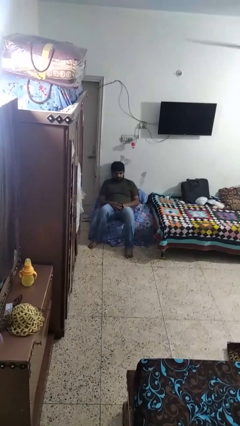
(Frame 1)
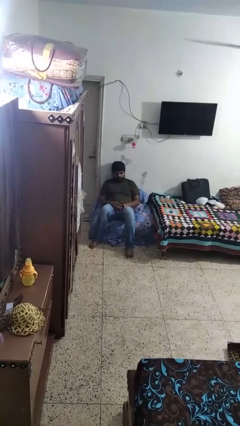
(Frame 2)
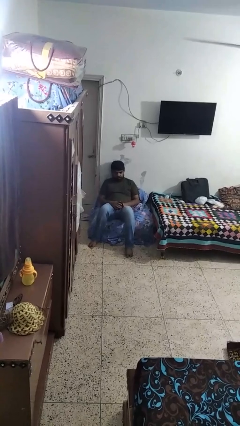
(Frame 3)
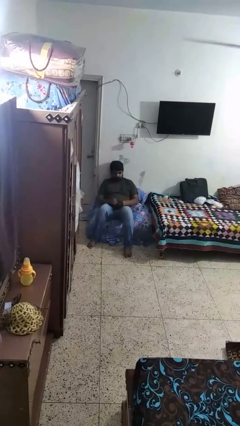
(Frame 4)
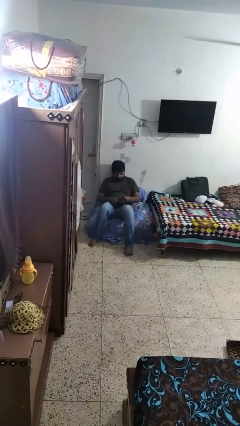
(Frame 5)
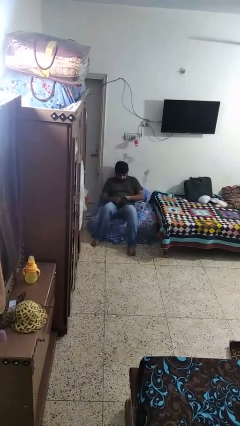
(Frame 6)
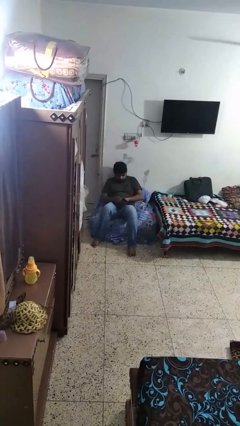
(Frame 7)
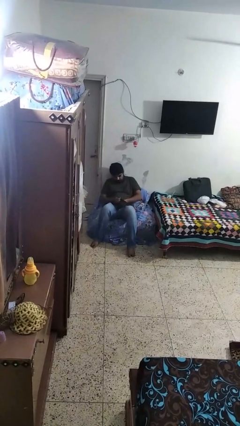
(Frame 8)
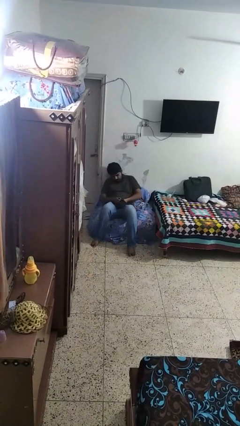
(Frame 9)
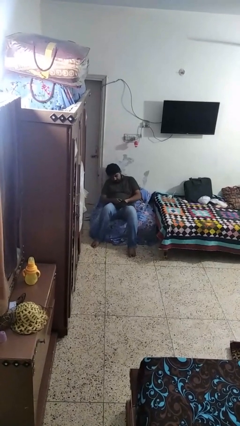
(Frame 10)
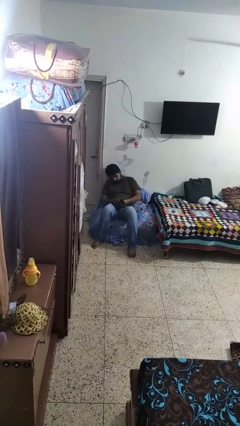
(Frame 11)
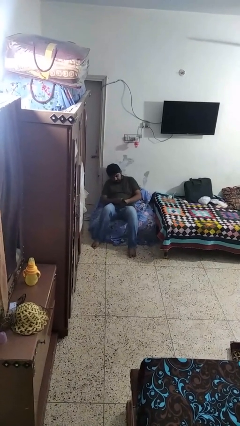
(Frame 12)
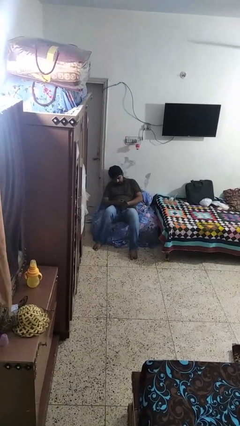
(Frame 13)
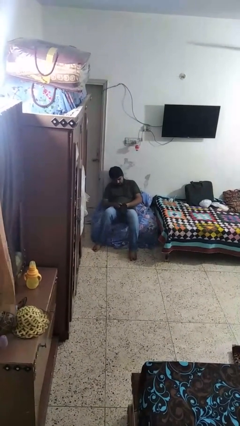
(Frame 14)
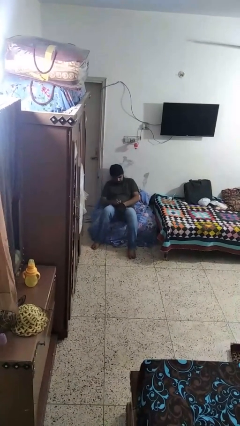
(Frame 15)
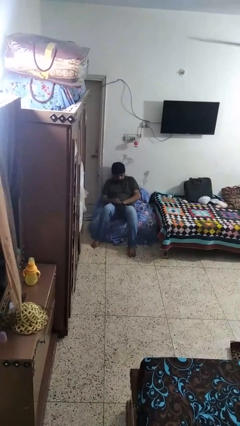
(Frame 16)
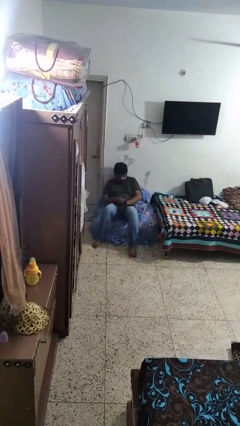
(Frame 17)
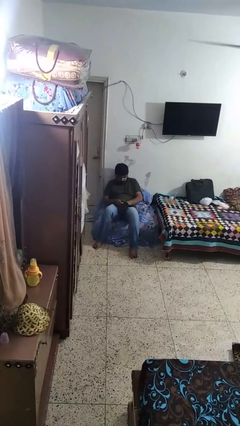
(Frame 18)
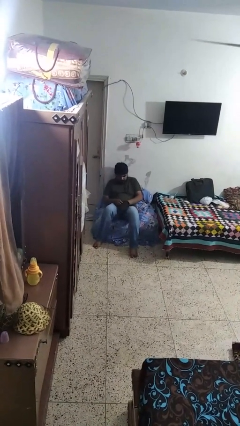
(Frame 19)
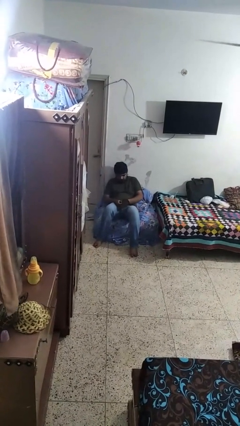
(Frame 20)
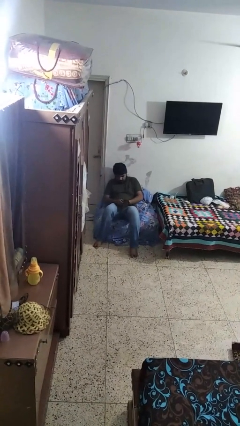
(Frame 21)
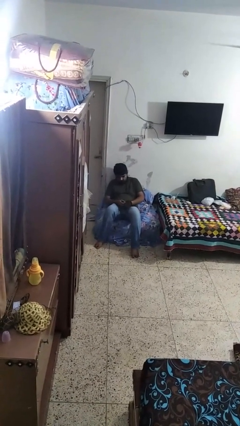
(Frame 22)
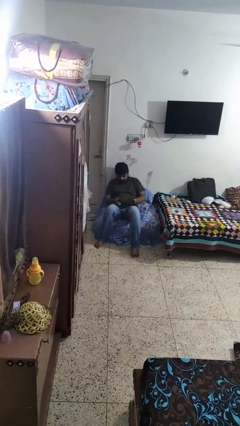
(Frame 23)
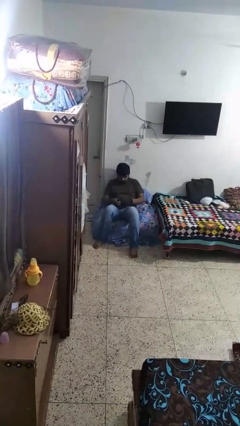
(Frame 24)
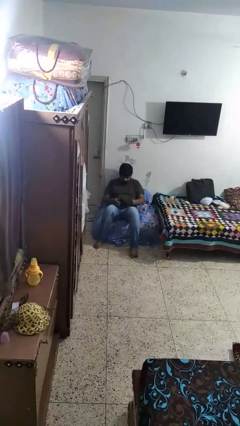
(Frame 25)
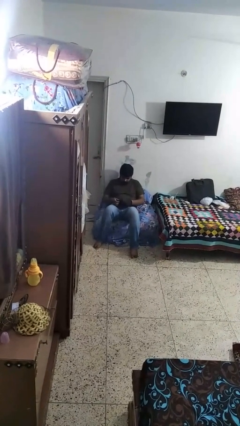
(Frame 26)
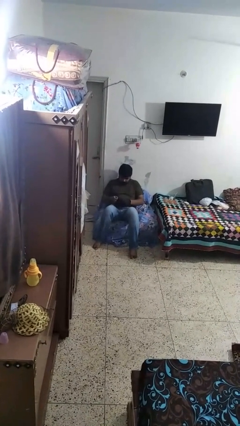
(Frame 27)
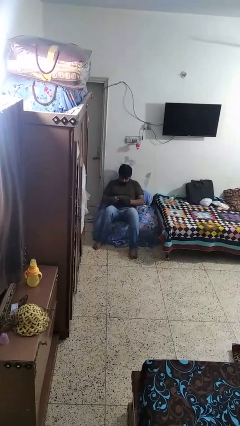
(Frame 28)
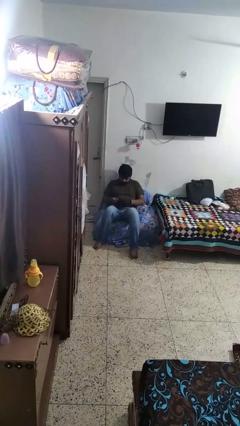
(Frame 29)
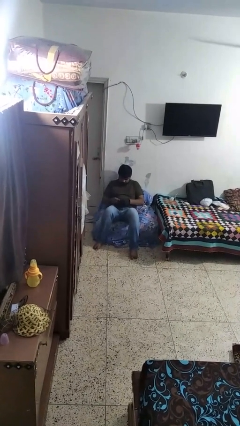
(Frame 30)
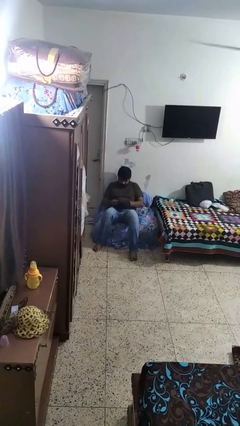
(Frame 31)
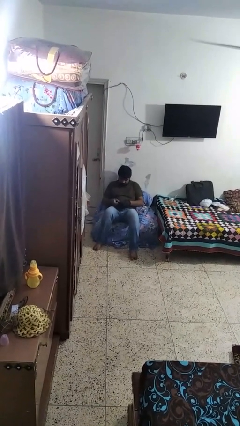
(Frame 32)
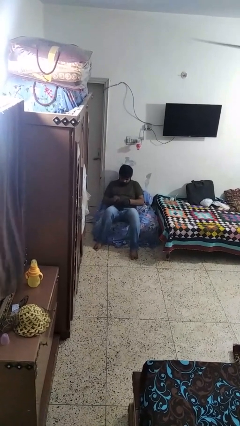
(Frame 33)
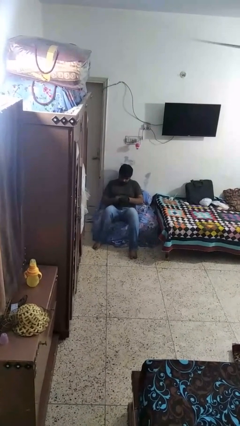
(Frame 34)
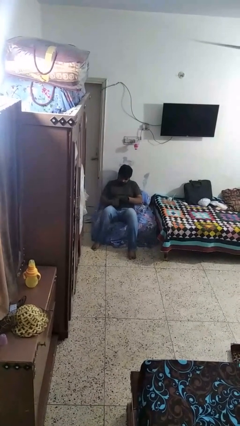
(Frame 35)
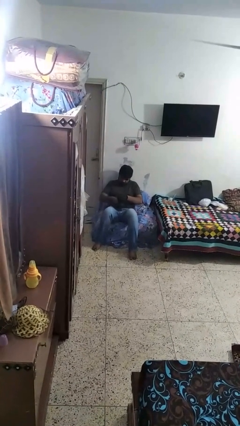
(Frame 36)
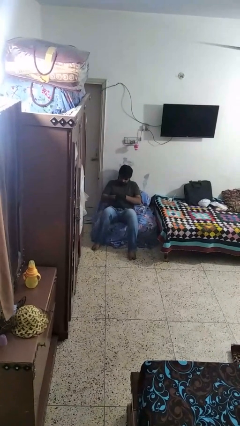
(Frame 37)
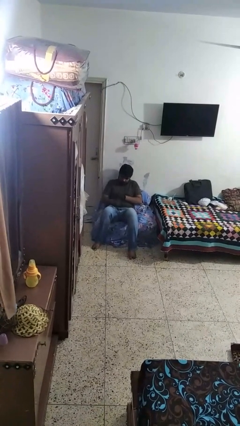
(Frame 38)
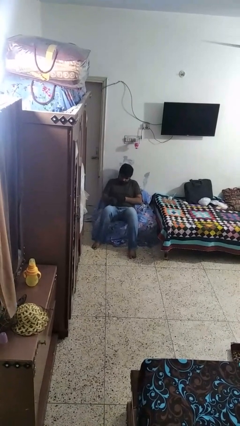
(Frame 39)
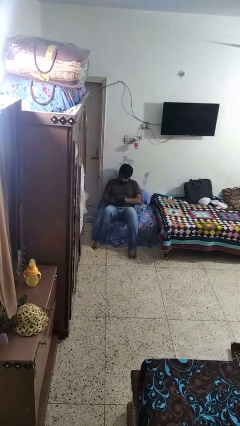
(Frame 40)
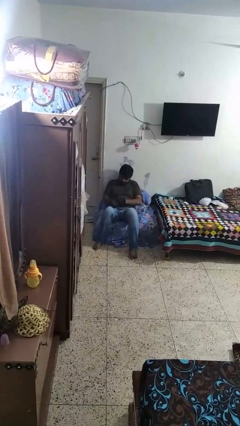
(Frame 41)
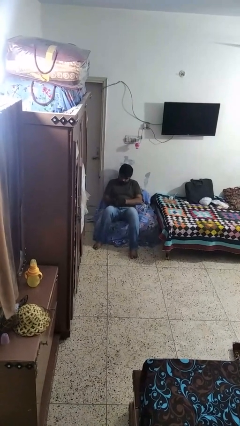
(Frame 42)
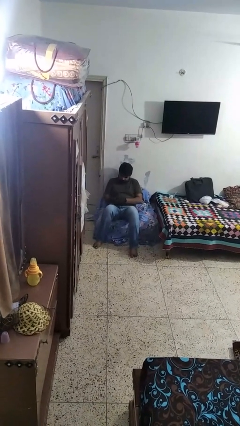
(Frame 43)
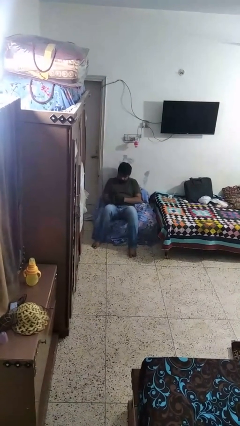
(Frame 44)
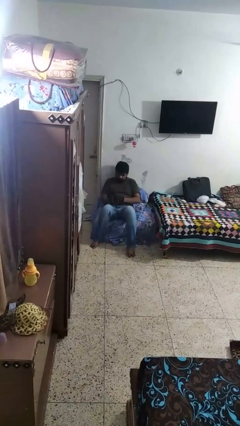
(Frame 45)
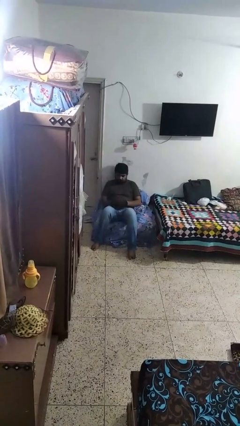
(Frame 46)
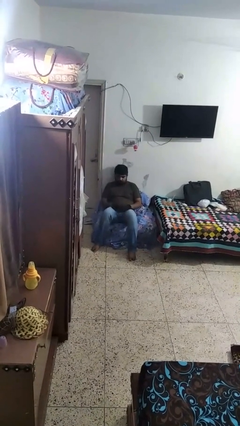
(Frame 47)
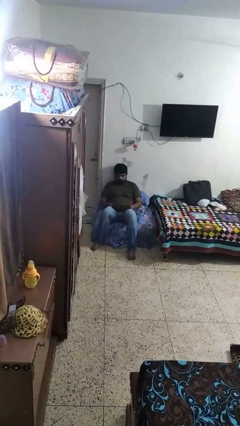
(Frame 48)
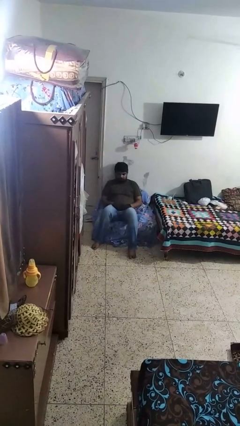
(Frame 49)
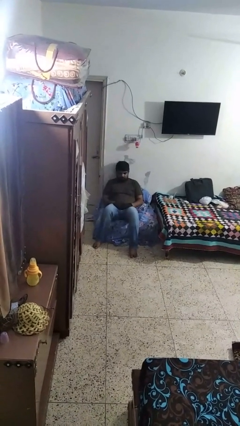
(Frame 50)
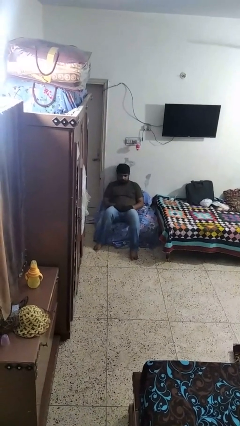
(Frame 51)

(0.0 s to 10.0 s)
person puts on gloves

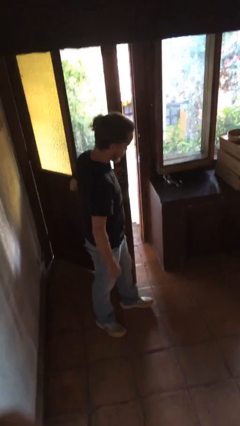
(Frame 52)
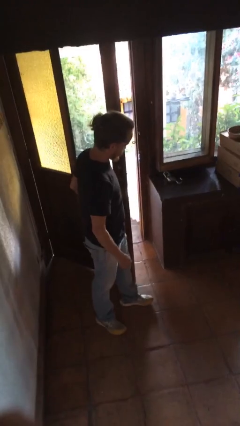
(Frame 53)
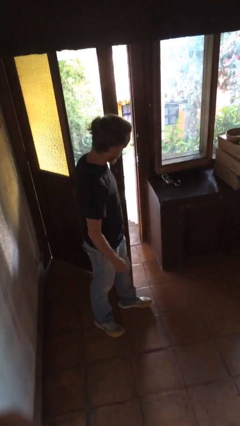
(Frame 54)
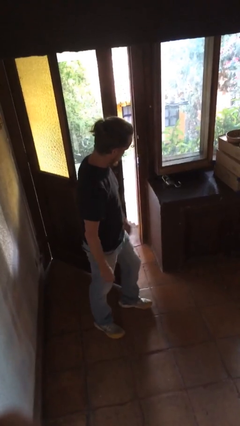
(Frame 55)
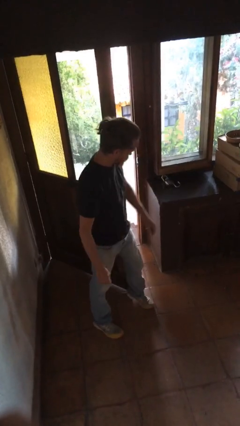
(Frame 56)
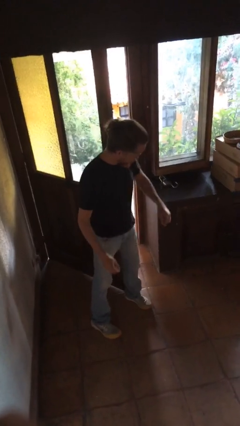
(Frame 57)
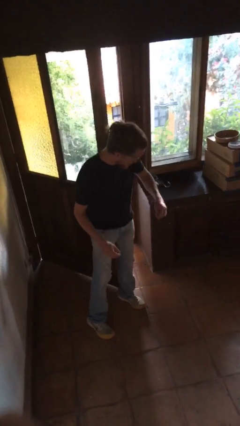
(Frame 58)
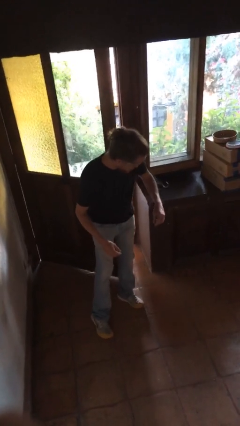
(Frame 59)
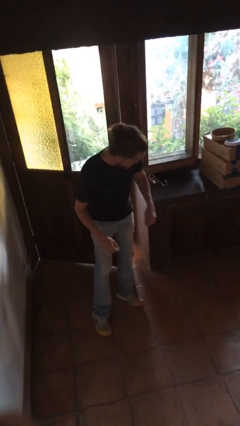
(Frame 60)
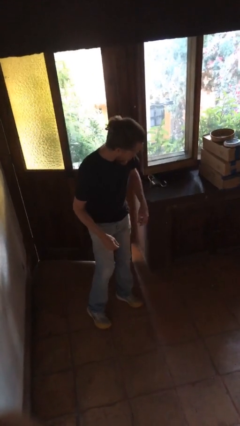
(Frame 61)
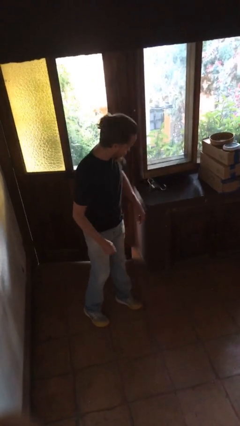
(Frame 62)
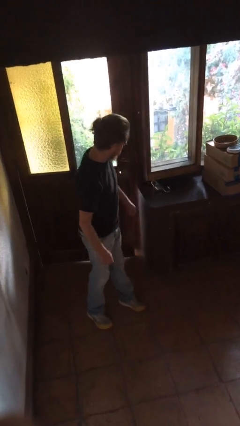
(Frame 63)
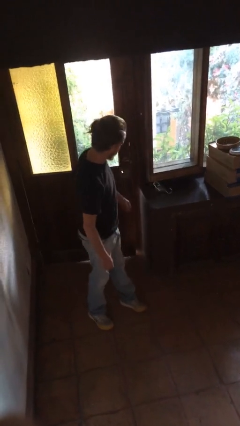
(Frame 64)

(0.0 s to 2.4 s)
person closes door with hip

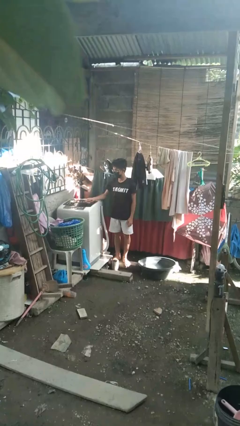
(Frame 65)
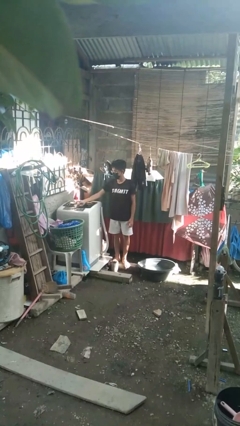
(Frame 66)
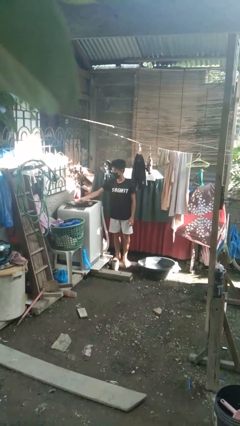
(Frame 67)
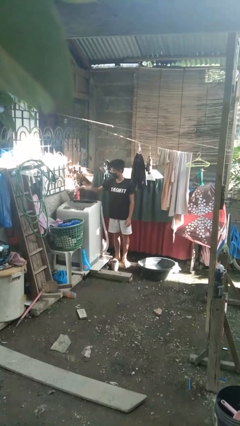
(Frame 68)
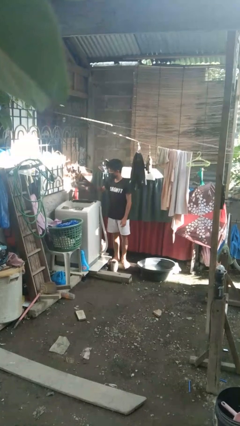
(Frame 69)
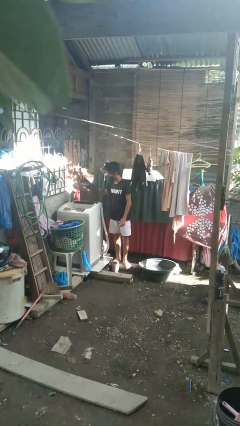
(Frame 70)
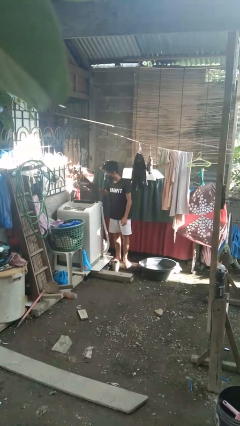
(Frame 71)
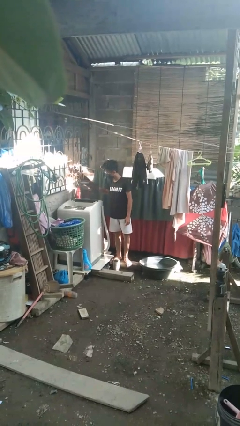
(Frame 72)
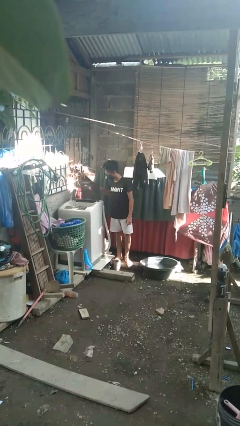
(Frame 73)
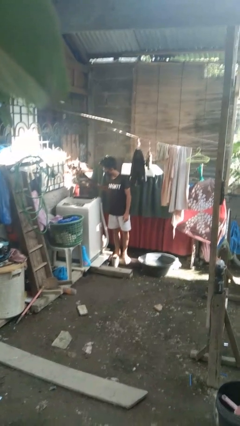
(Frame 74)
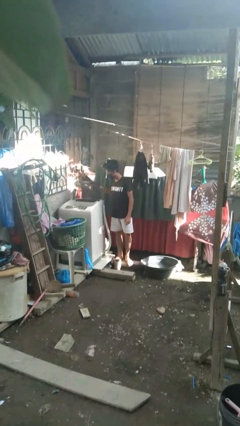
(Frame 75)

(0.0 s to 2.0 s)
person opens clothes washer

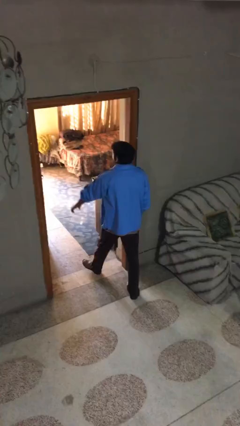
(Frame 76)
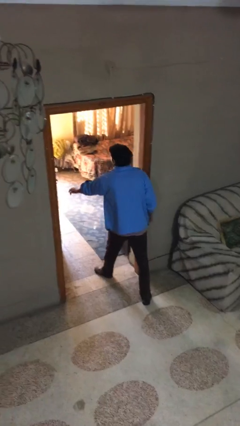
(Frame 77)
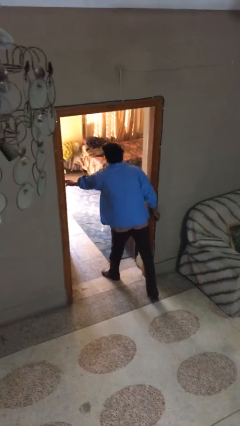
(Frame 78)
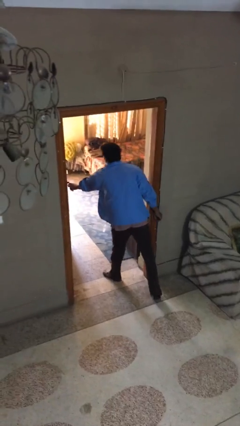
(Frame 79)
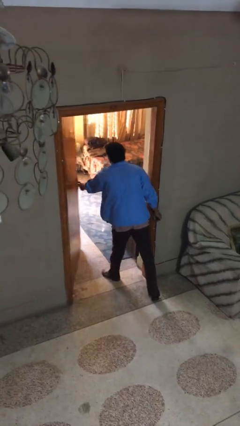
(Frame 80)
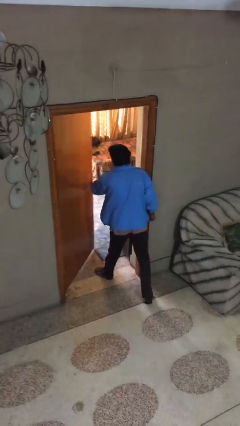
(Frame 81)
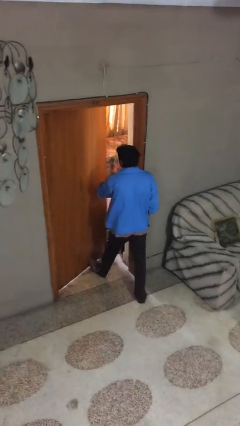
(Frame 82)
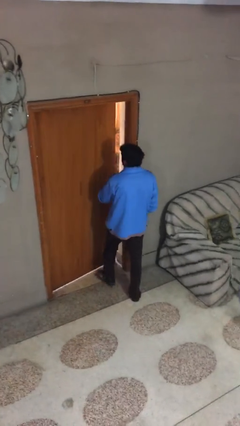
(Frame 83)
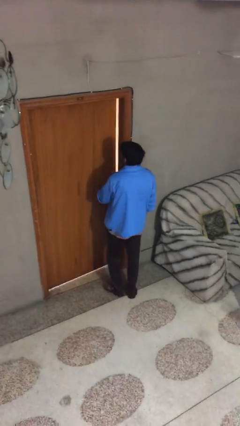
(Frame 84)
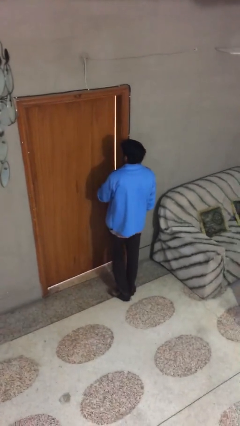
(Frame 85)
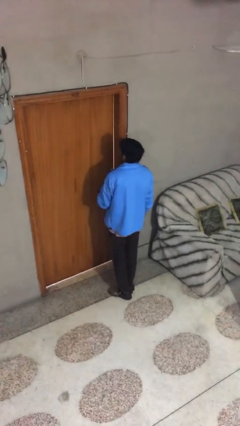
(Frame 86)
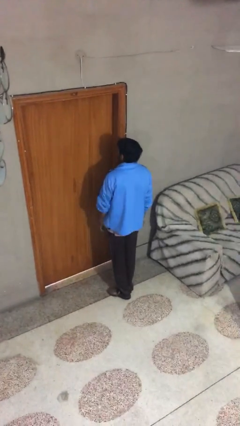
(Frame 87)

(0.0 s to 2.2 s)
person closes facility door

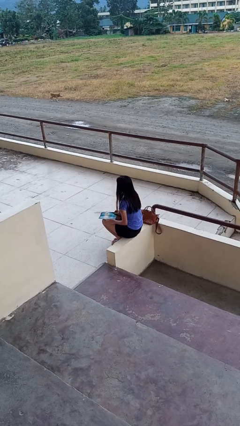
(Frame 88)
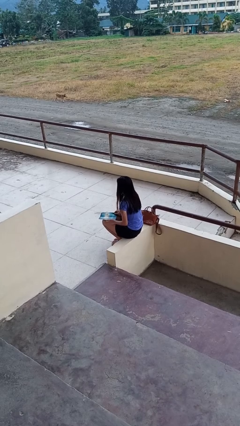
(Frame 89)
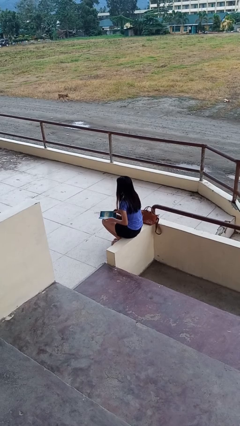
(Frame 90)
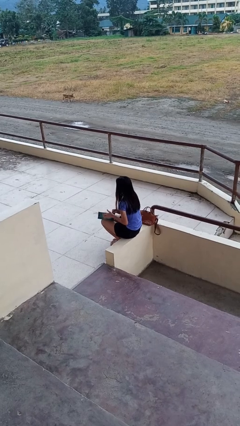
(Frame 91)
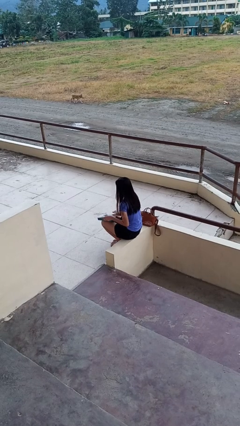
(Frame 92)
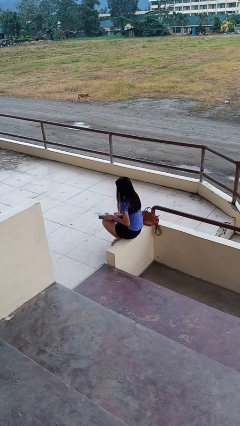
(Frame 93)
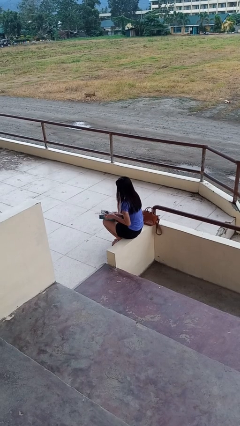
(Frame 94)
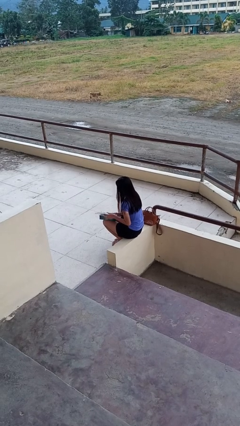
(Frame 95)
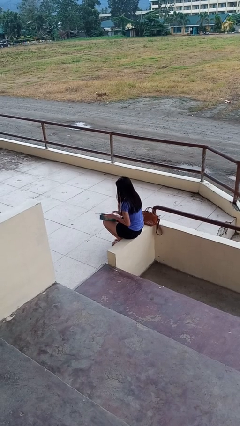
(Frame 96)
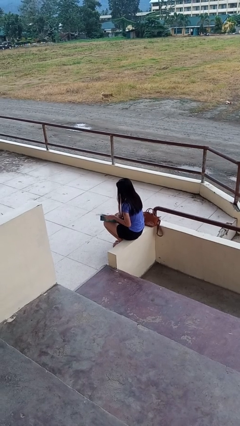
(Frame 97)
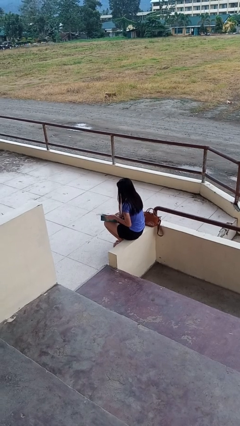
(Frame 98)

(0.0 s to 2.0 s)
person reads magazine
